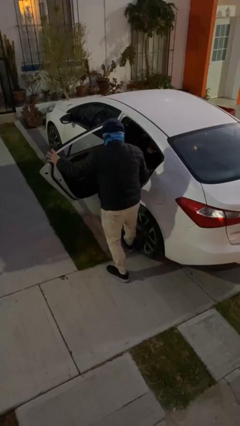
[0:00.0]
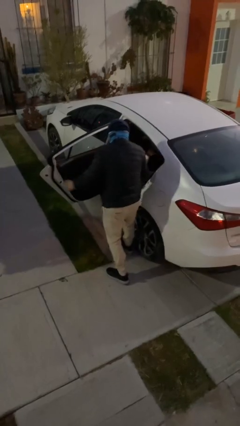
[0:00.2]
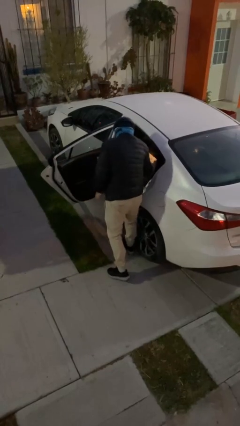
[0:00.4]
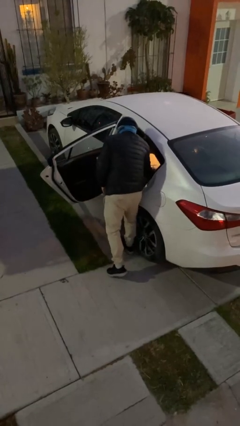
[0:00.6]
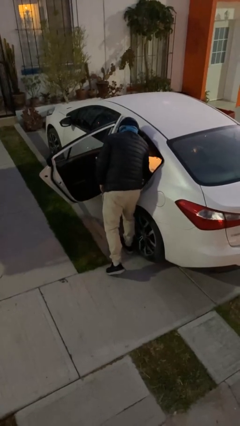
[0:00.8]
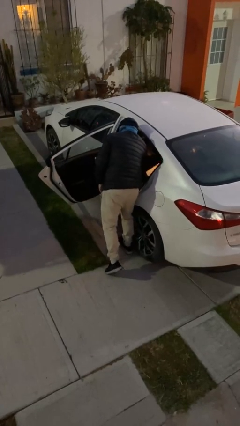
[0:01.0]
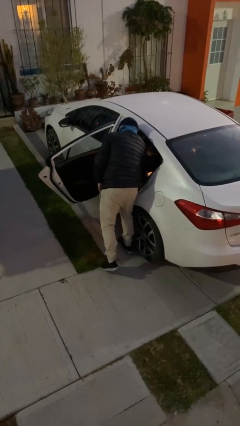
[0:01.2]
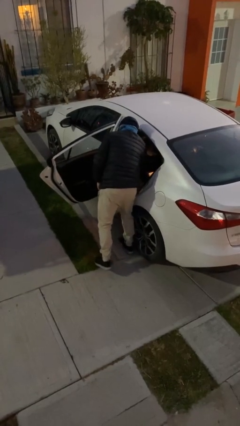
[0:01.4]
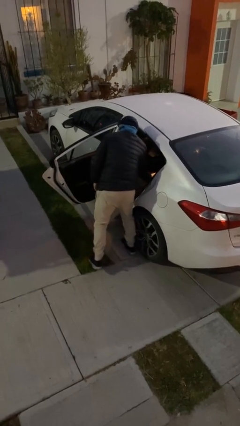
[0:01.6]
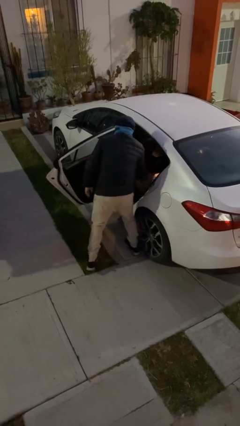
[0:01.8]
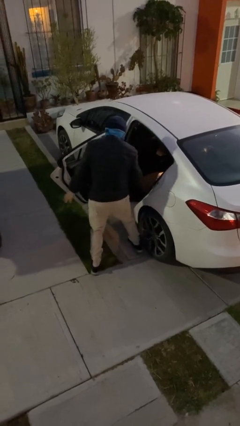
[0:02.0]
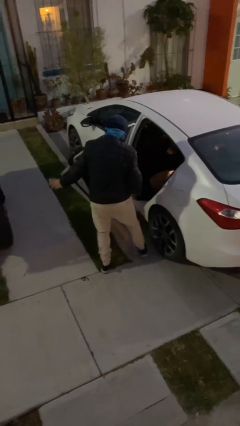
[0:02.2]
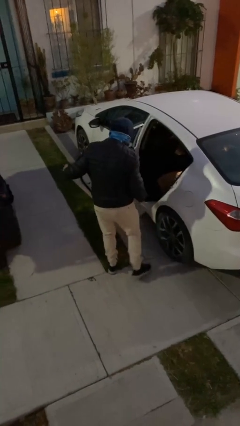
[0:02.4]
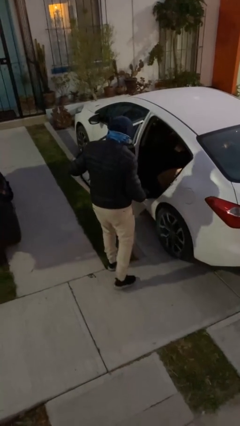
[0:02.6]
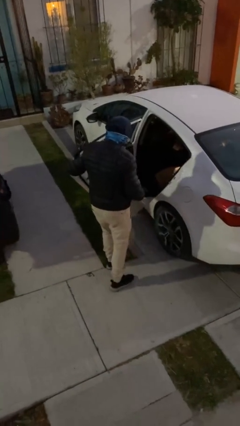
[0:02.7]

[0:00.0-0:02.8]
person loads car

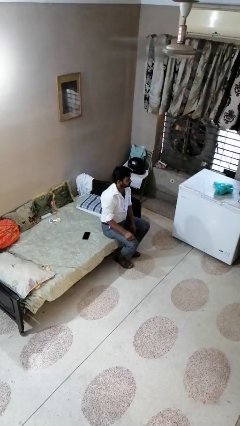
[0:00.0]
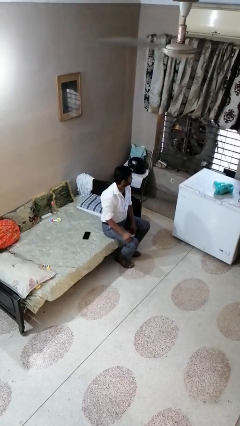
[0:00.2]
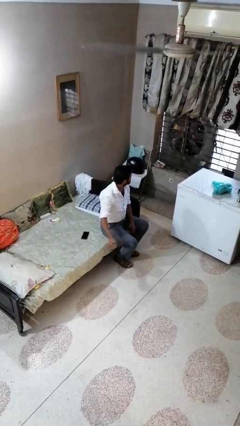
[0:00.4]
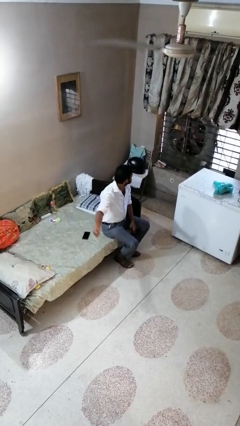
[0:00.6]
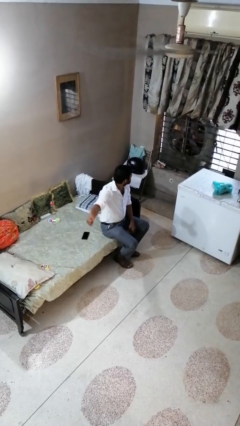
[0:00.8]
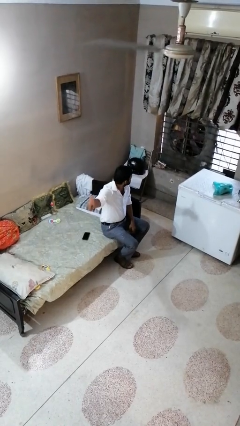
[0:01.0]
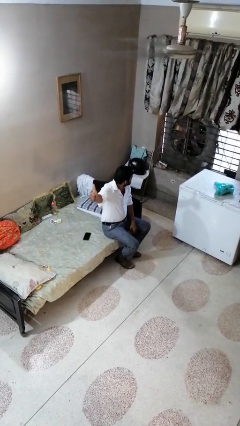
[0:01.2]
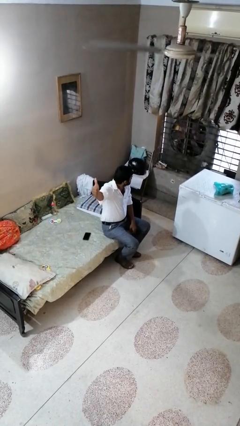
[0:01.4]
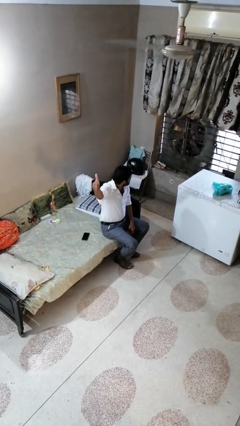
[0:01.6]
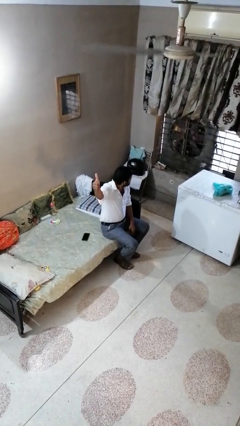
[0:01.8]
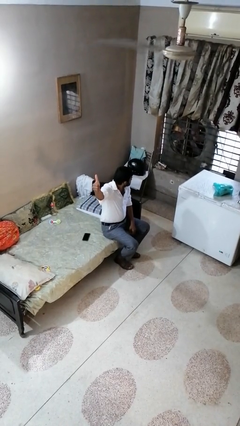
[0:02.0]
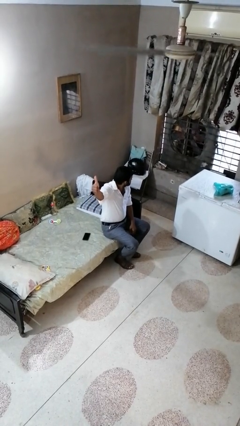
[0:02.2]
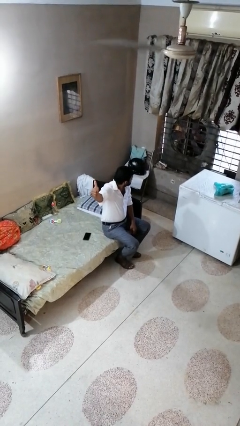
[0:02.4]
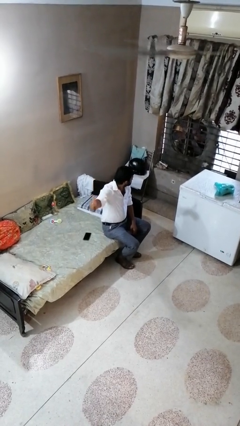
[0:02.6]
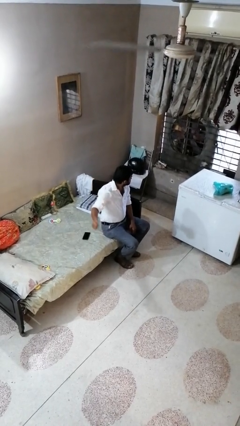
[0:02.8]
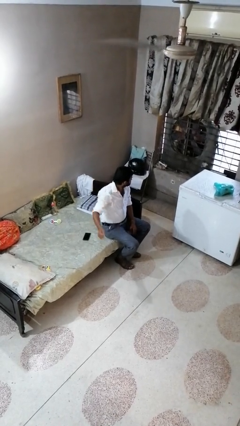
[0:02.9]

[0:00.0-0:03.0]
person gestures thumbs up

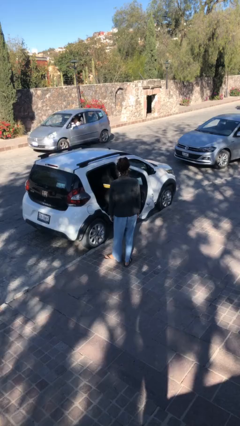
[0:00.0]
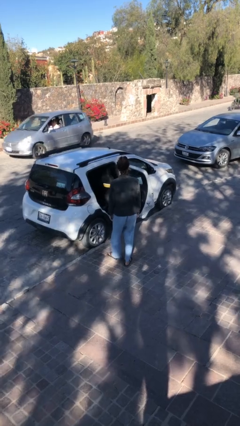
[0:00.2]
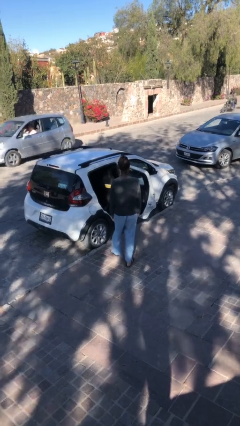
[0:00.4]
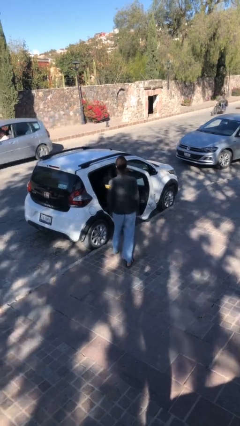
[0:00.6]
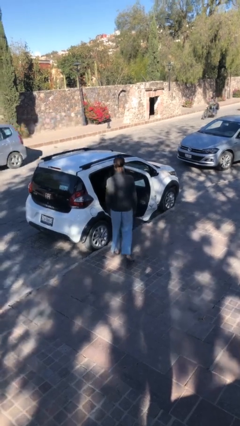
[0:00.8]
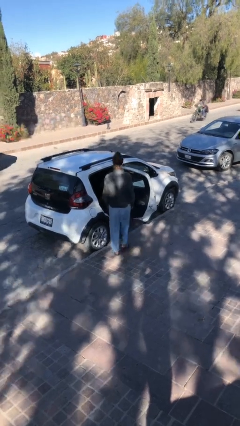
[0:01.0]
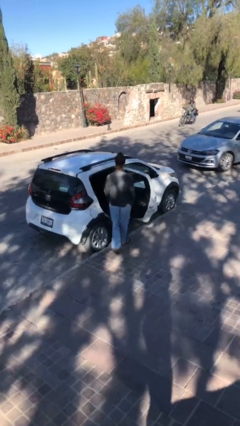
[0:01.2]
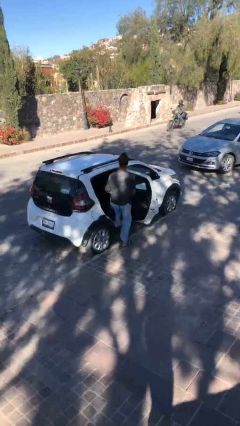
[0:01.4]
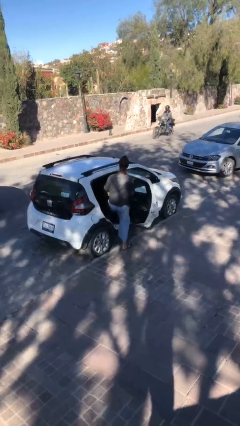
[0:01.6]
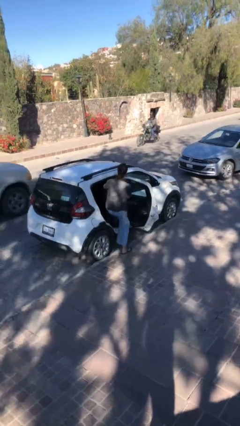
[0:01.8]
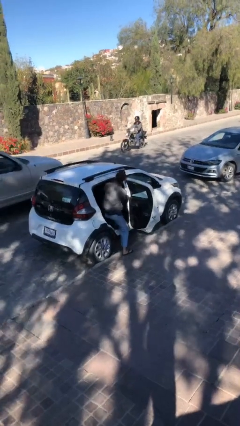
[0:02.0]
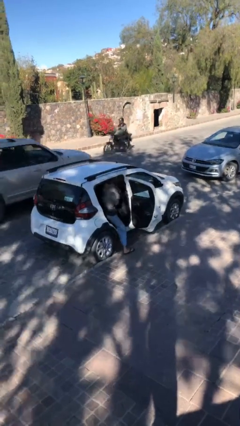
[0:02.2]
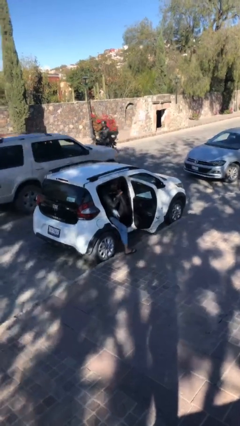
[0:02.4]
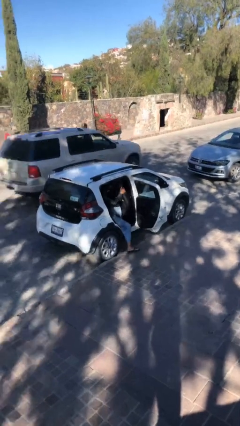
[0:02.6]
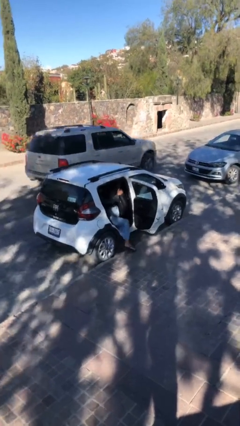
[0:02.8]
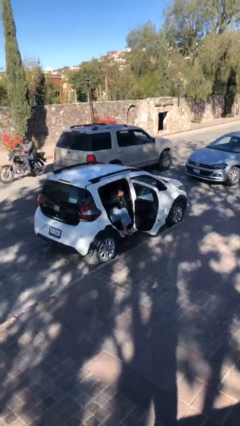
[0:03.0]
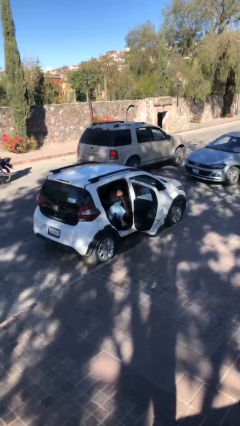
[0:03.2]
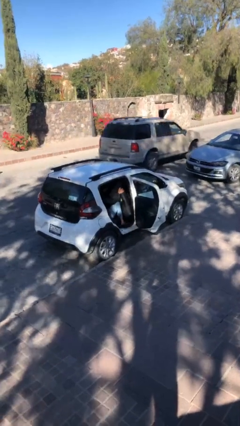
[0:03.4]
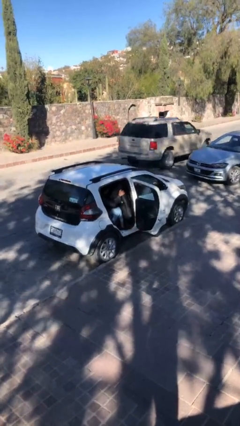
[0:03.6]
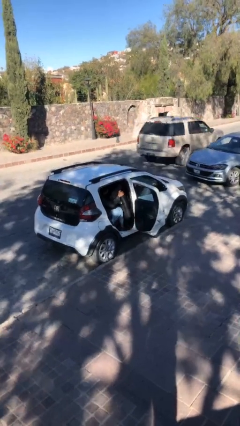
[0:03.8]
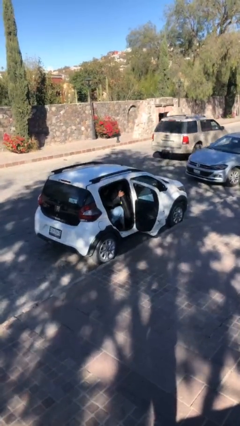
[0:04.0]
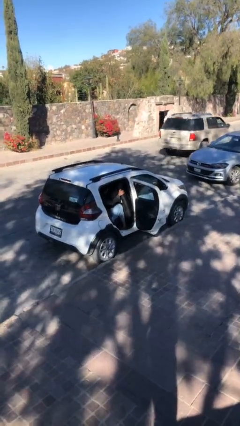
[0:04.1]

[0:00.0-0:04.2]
person enters car

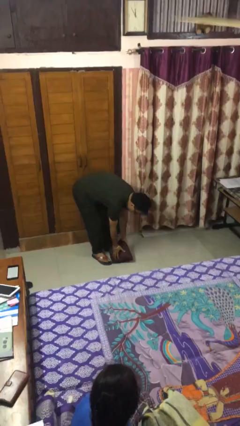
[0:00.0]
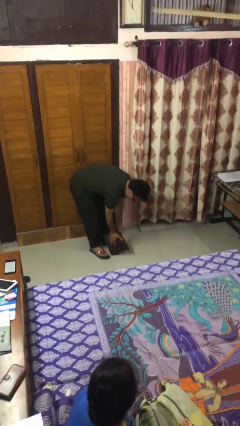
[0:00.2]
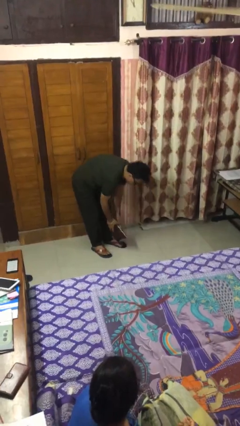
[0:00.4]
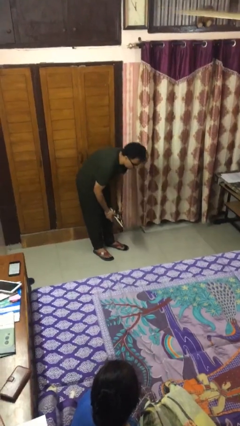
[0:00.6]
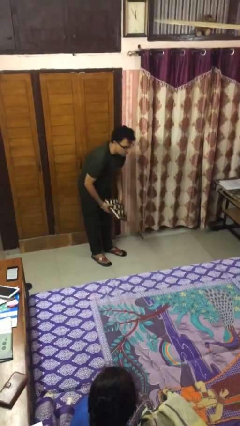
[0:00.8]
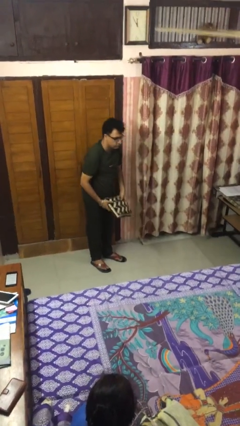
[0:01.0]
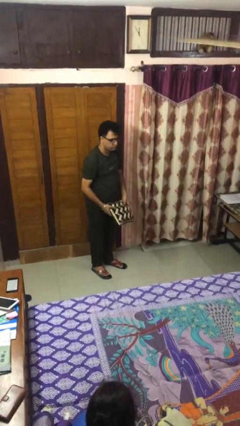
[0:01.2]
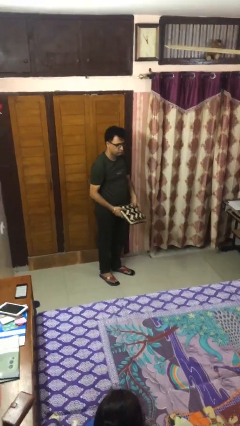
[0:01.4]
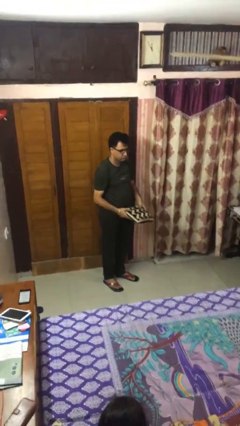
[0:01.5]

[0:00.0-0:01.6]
person picks up object from floor

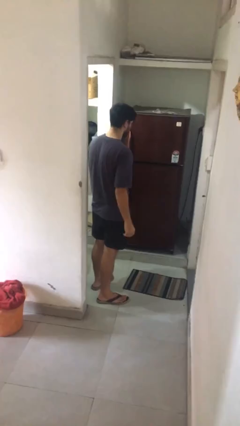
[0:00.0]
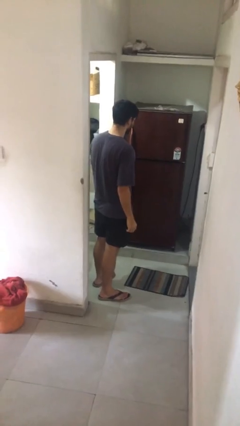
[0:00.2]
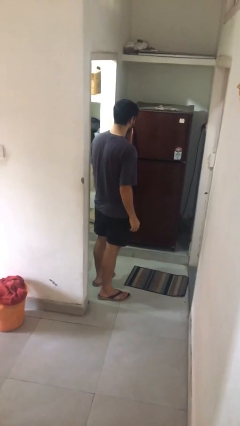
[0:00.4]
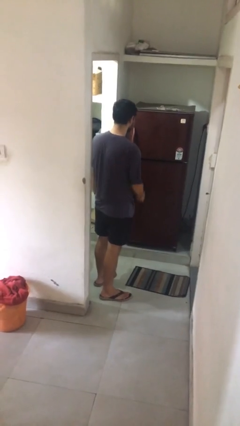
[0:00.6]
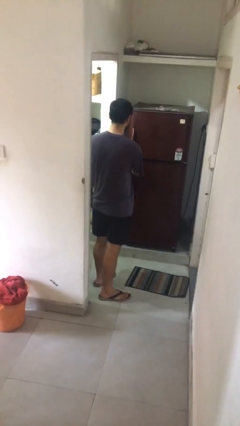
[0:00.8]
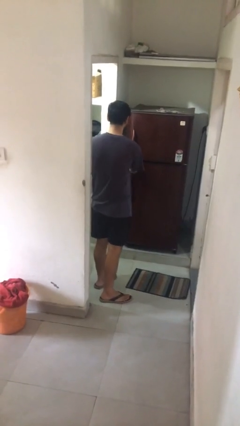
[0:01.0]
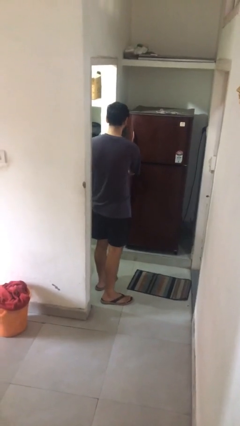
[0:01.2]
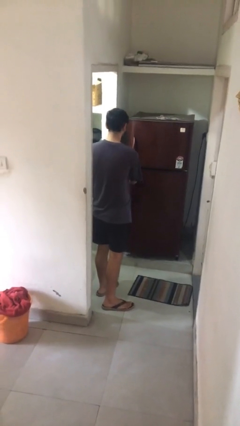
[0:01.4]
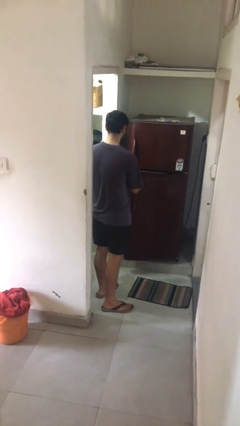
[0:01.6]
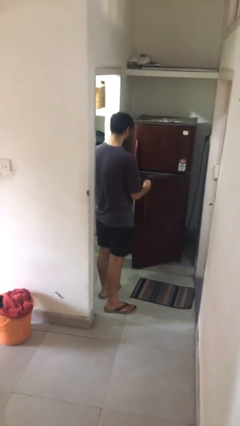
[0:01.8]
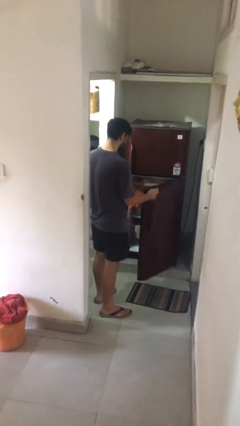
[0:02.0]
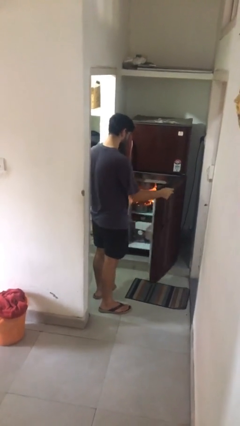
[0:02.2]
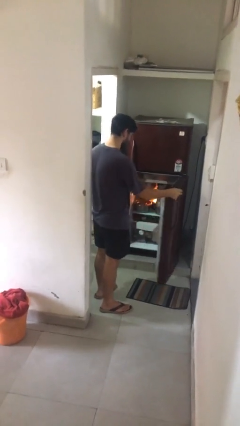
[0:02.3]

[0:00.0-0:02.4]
person opens refrigerator

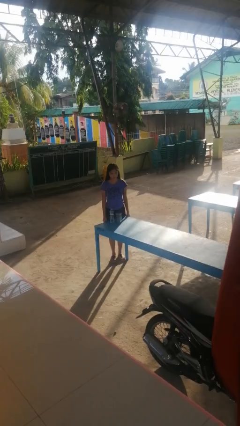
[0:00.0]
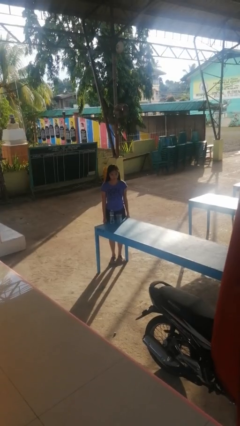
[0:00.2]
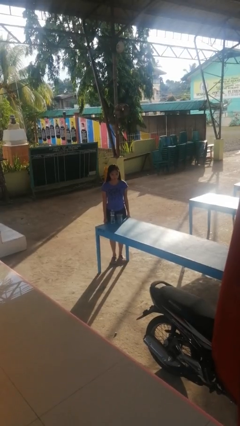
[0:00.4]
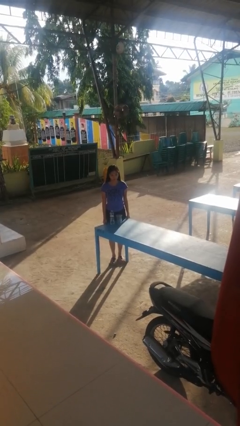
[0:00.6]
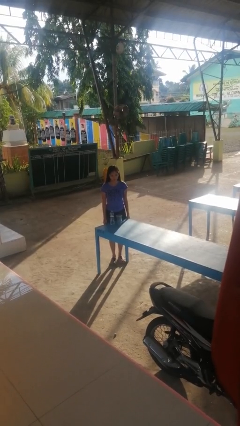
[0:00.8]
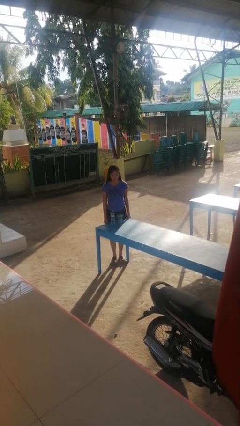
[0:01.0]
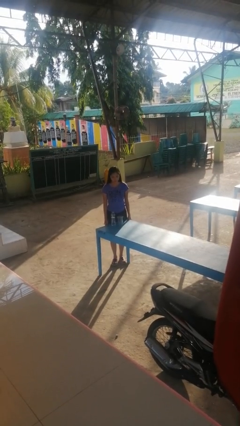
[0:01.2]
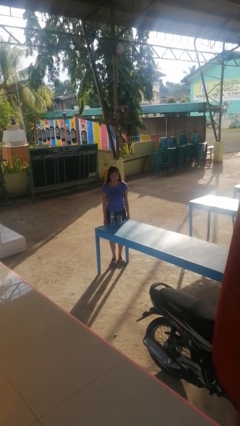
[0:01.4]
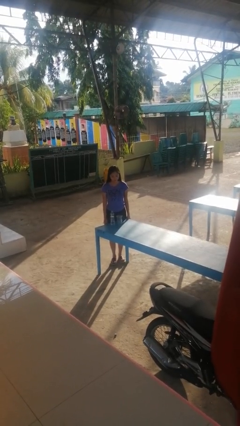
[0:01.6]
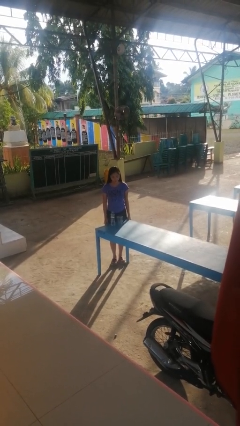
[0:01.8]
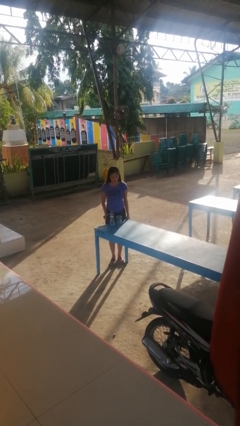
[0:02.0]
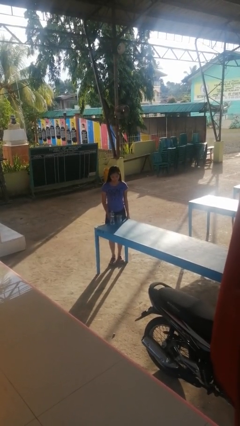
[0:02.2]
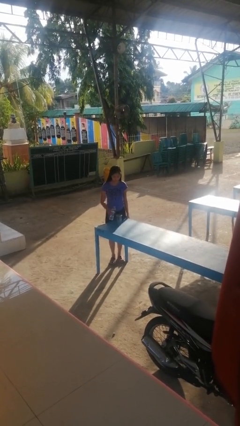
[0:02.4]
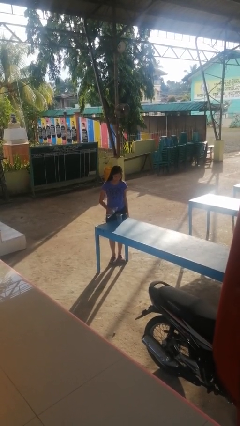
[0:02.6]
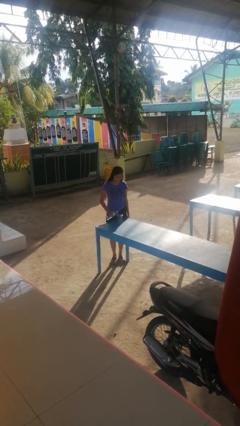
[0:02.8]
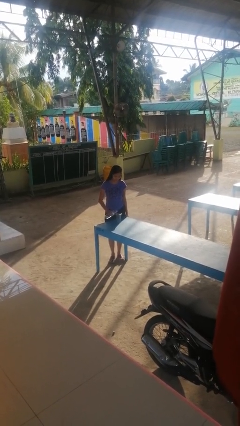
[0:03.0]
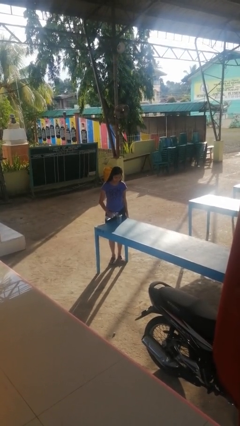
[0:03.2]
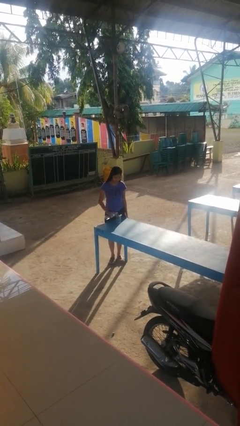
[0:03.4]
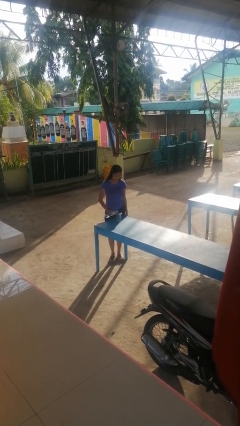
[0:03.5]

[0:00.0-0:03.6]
person pours liquid into cup
